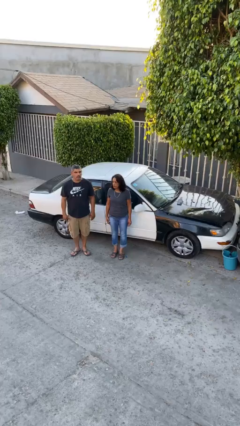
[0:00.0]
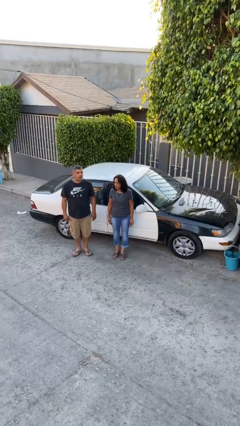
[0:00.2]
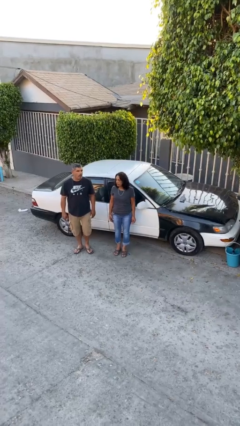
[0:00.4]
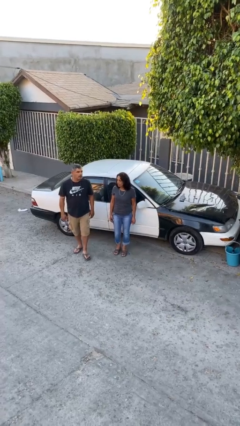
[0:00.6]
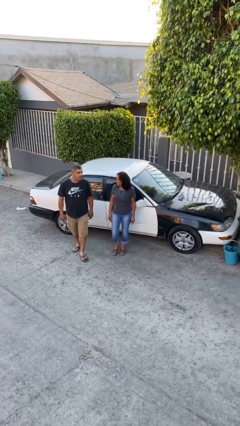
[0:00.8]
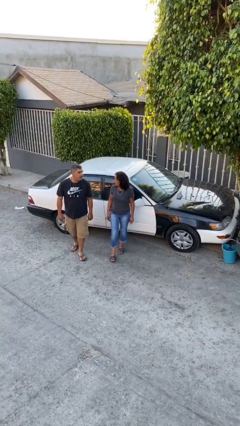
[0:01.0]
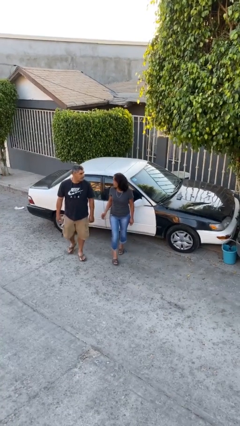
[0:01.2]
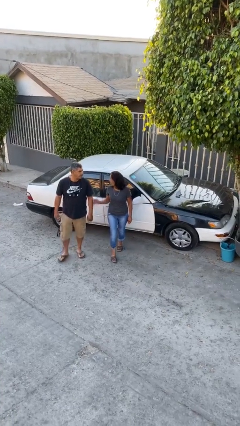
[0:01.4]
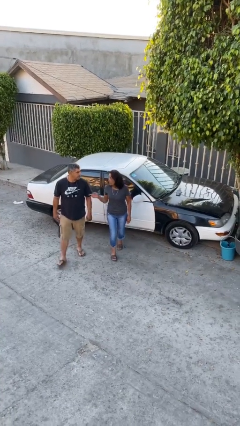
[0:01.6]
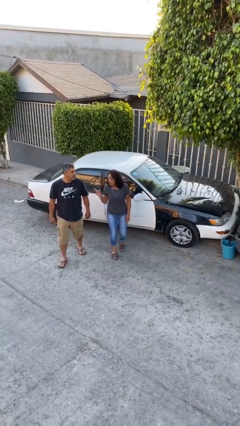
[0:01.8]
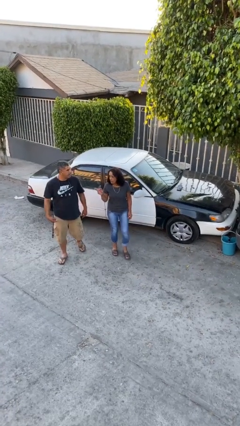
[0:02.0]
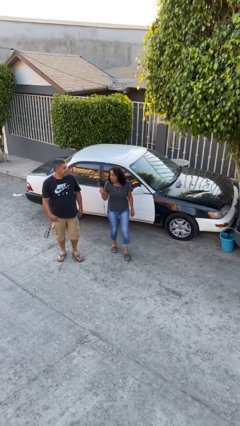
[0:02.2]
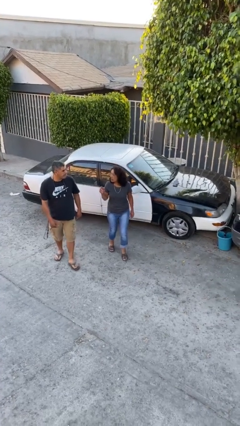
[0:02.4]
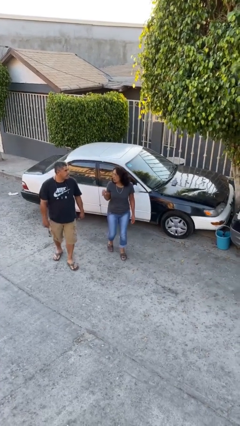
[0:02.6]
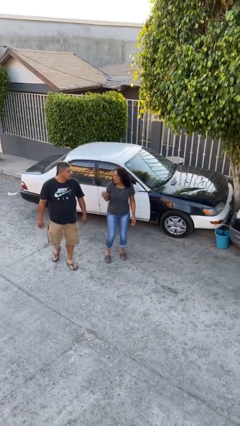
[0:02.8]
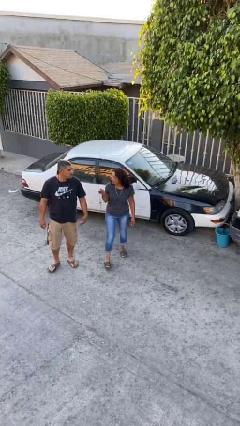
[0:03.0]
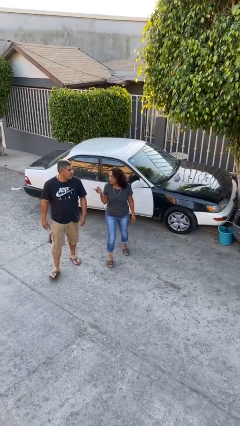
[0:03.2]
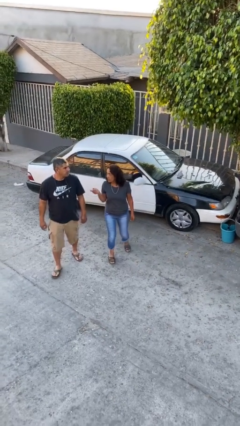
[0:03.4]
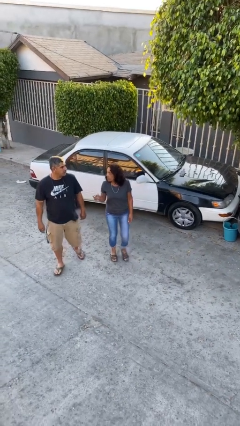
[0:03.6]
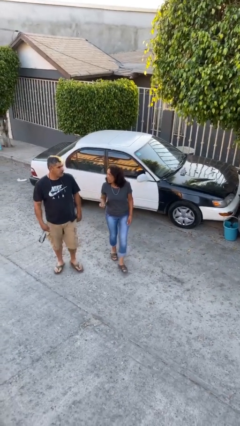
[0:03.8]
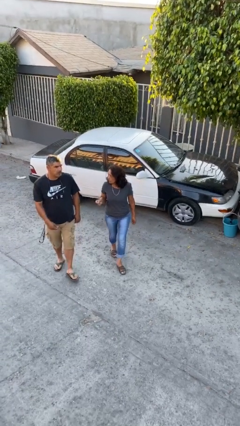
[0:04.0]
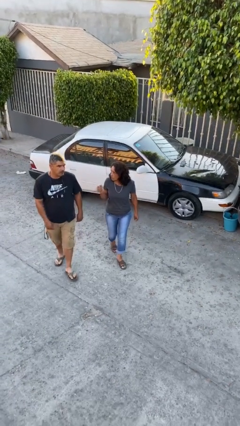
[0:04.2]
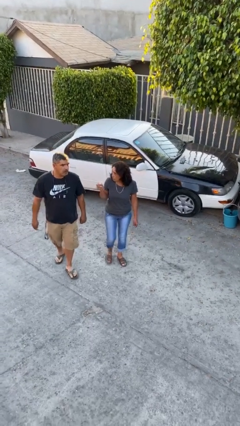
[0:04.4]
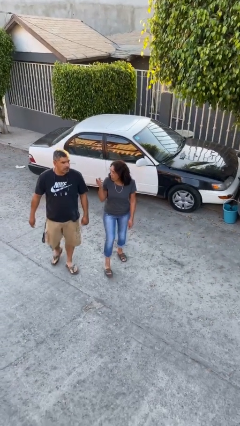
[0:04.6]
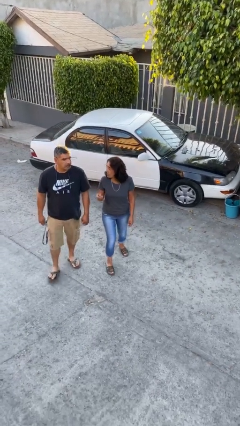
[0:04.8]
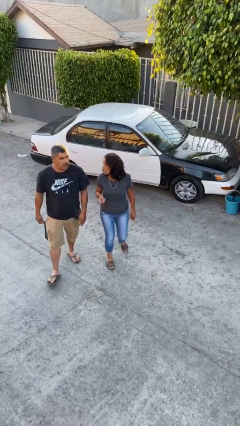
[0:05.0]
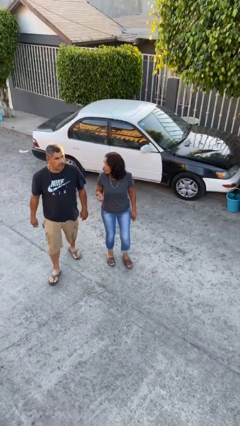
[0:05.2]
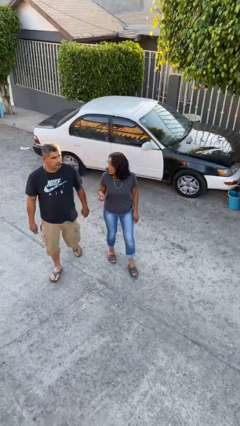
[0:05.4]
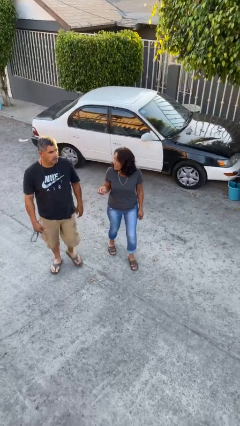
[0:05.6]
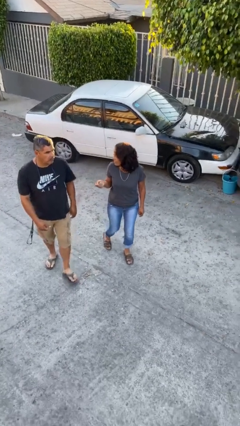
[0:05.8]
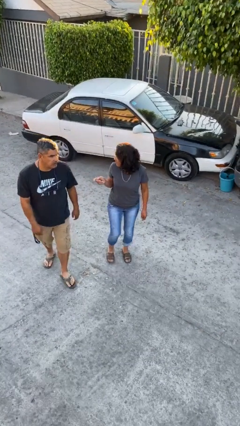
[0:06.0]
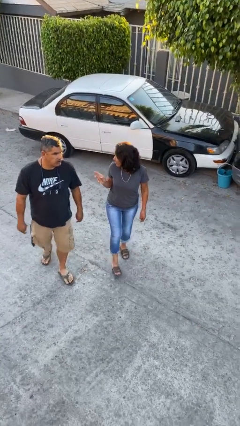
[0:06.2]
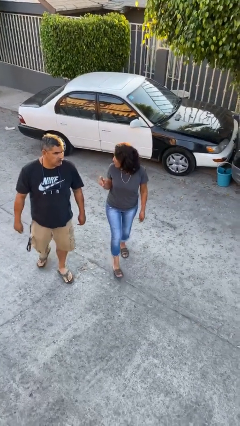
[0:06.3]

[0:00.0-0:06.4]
person talks to person

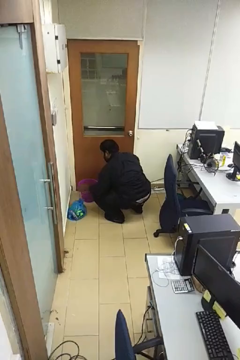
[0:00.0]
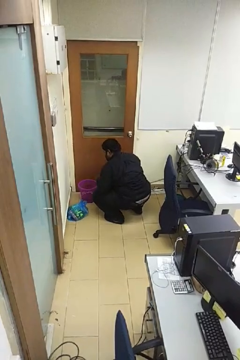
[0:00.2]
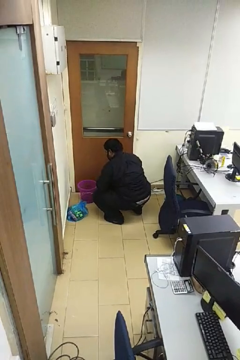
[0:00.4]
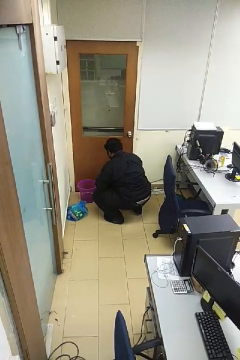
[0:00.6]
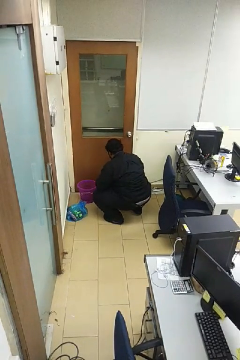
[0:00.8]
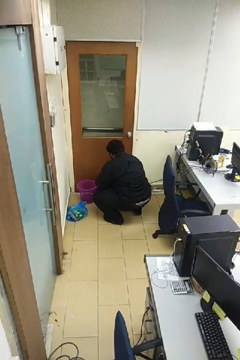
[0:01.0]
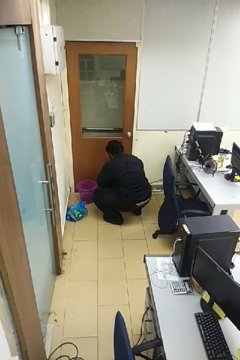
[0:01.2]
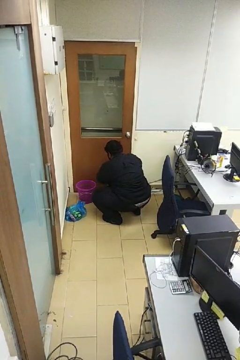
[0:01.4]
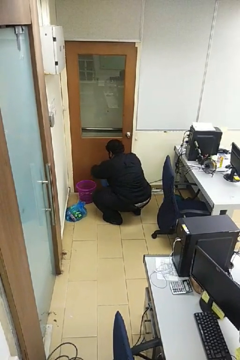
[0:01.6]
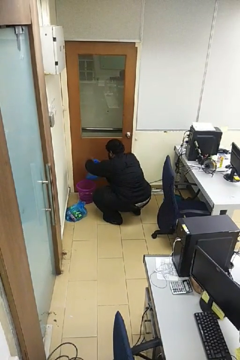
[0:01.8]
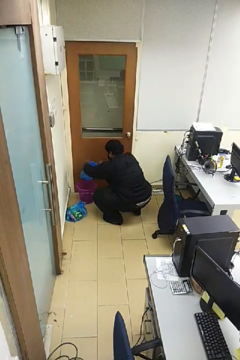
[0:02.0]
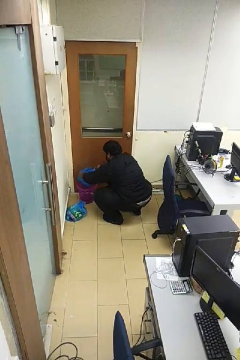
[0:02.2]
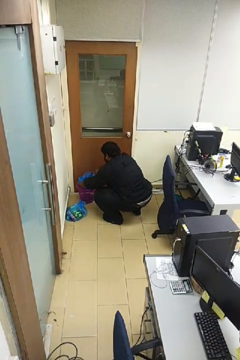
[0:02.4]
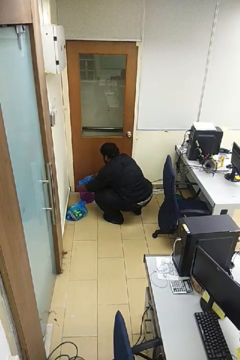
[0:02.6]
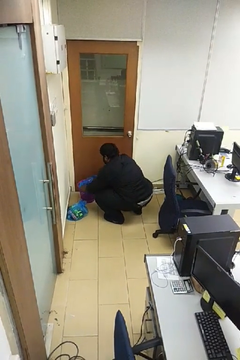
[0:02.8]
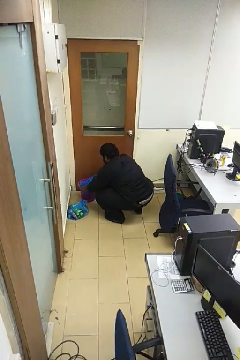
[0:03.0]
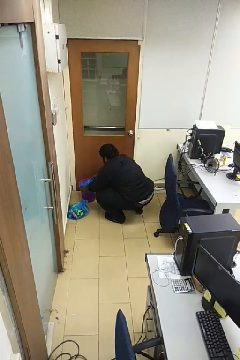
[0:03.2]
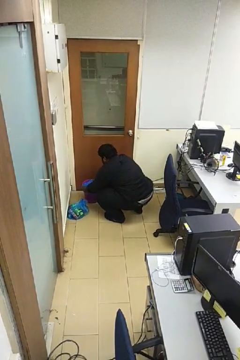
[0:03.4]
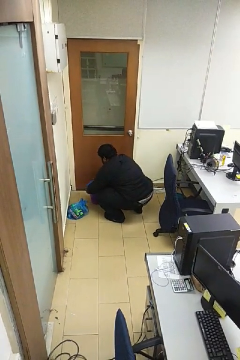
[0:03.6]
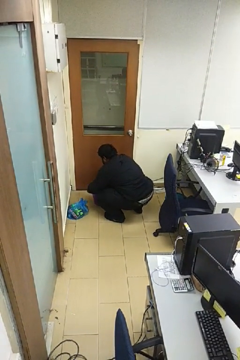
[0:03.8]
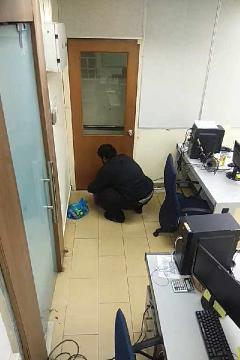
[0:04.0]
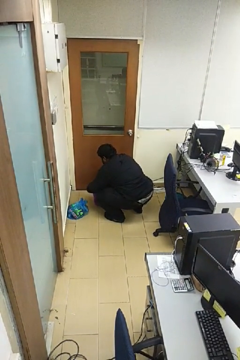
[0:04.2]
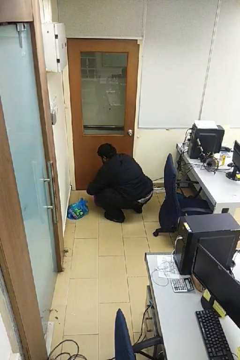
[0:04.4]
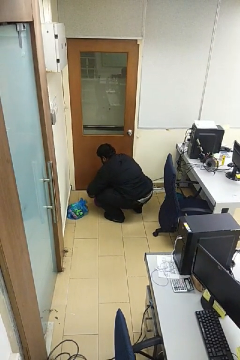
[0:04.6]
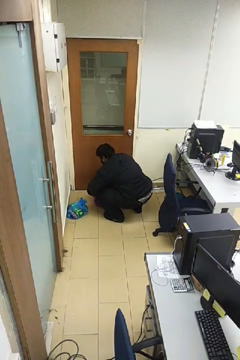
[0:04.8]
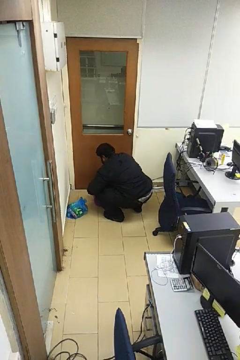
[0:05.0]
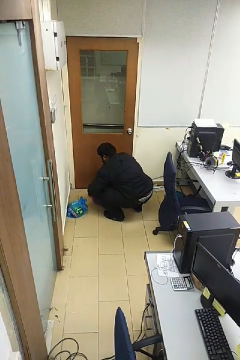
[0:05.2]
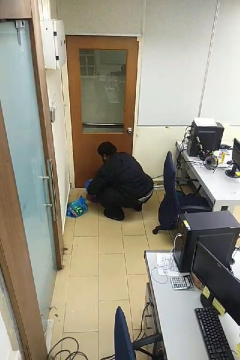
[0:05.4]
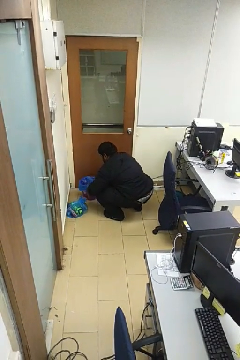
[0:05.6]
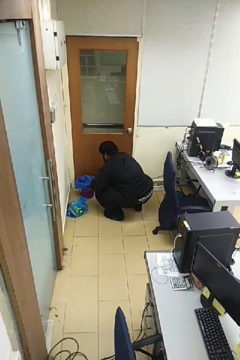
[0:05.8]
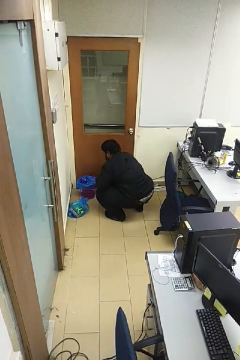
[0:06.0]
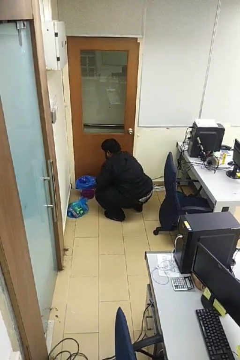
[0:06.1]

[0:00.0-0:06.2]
person inserts trashbag into trashcan

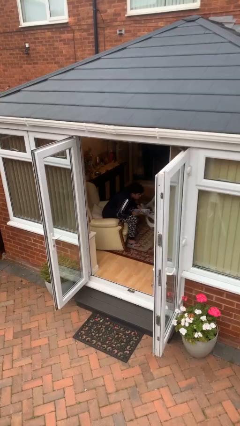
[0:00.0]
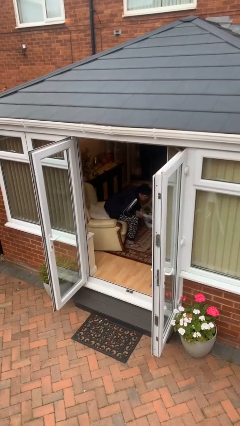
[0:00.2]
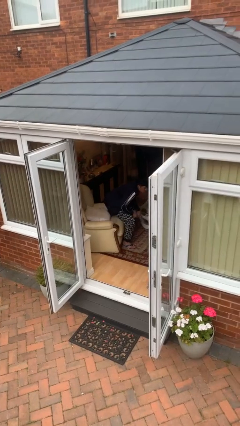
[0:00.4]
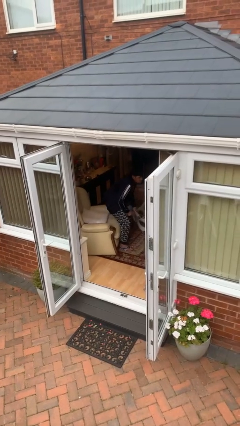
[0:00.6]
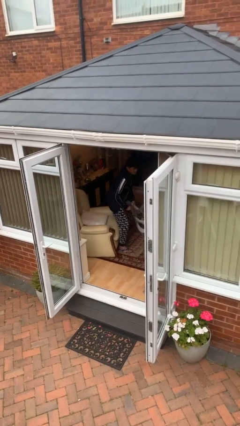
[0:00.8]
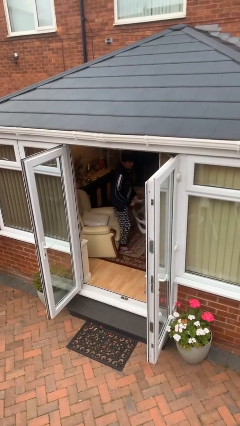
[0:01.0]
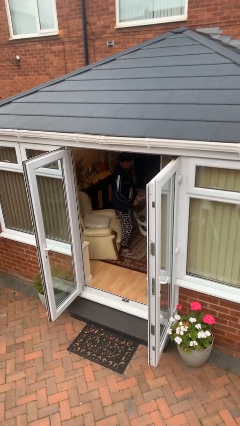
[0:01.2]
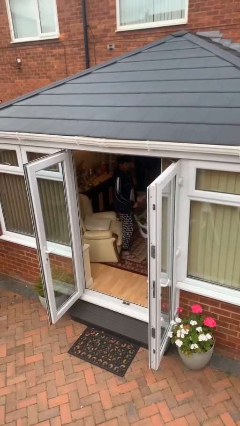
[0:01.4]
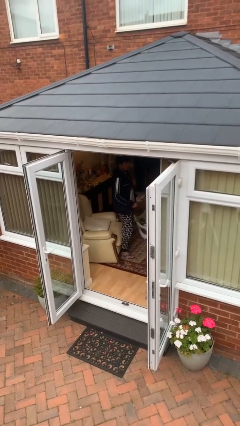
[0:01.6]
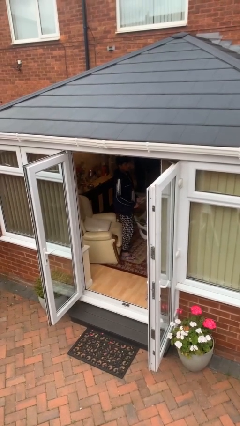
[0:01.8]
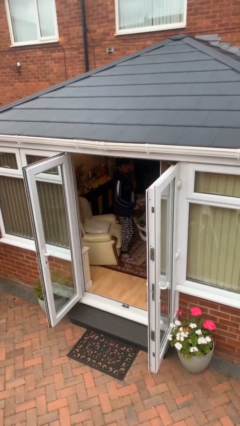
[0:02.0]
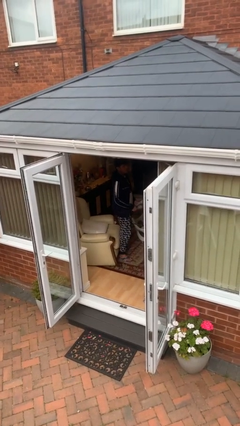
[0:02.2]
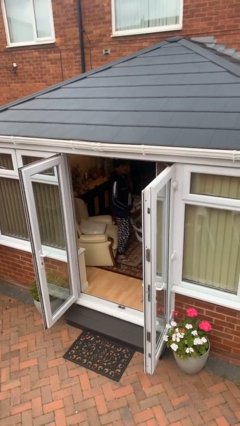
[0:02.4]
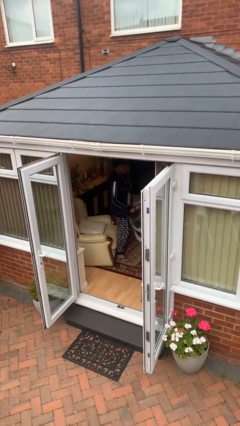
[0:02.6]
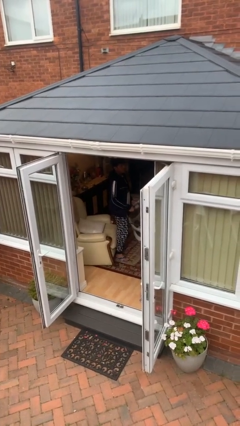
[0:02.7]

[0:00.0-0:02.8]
person stands up

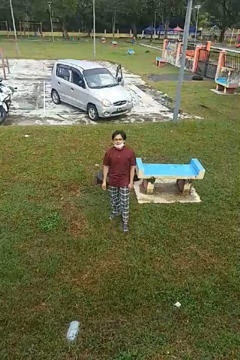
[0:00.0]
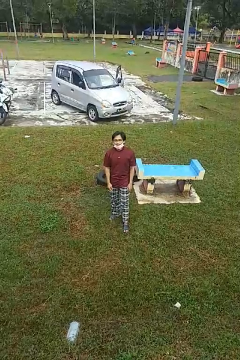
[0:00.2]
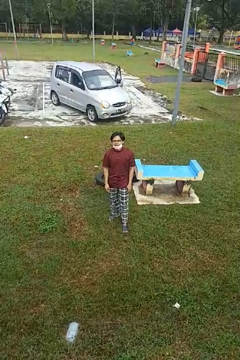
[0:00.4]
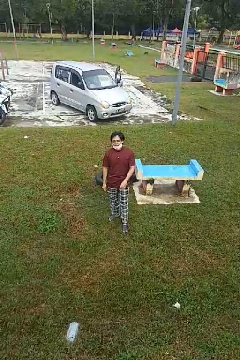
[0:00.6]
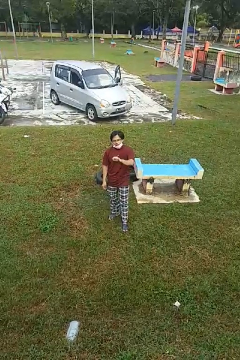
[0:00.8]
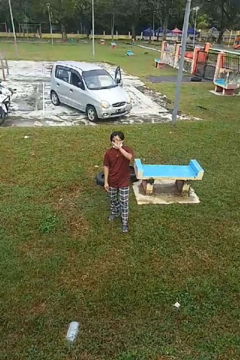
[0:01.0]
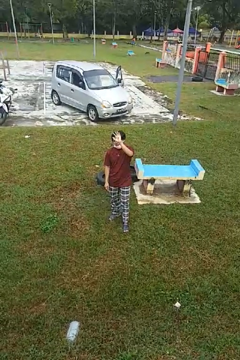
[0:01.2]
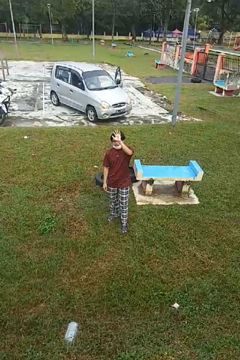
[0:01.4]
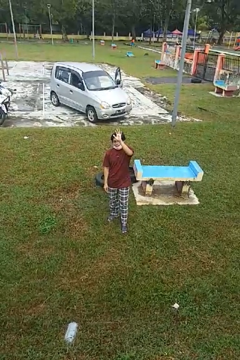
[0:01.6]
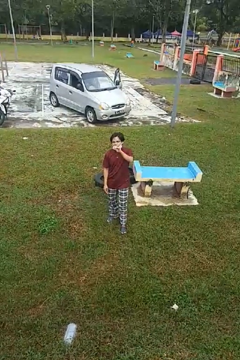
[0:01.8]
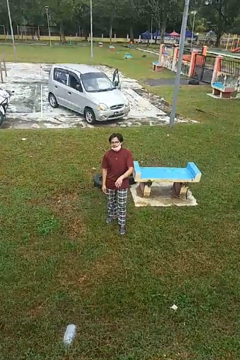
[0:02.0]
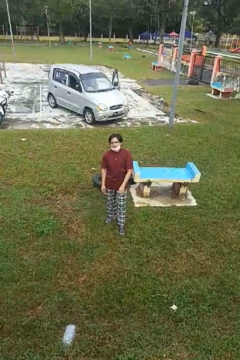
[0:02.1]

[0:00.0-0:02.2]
person waves at person

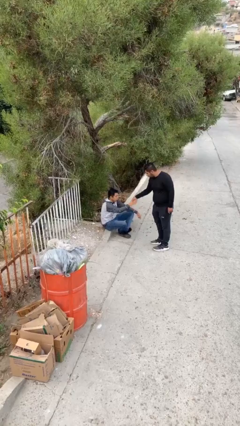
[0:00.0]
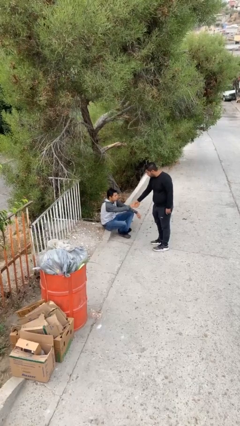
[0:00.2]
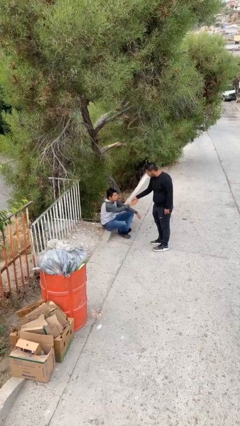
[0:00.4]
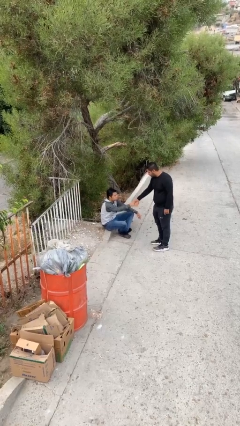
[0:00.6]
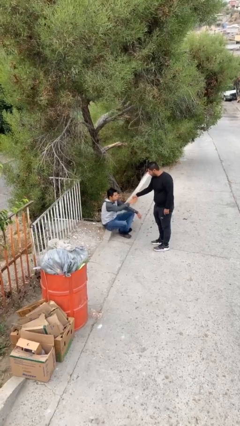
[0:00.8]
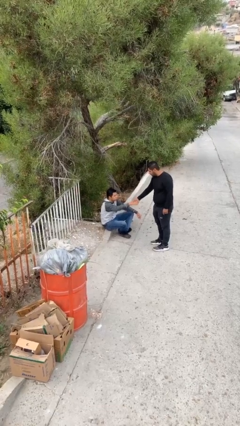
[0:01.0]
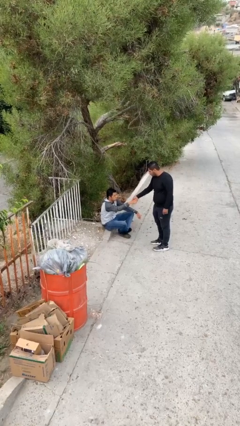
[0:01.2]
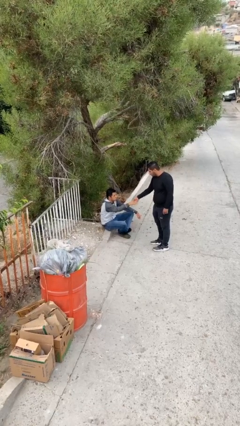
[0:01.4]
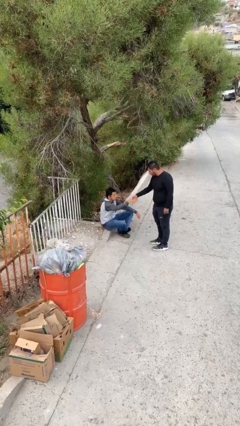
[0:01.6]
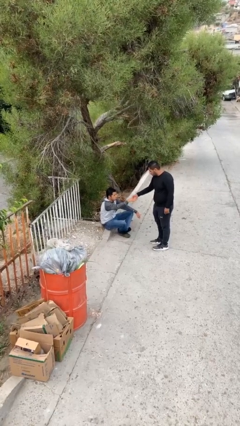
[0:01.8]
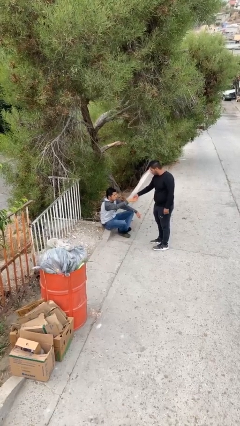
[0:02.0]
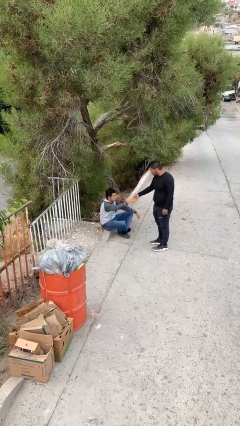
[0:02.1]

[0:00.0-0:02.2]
person shakes hand
